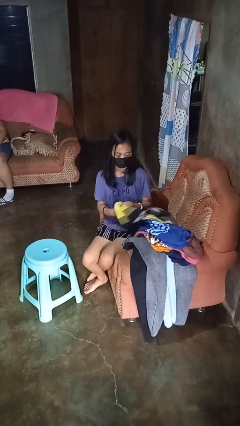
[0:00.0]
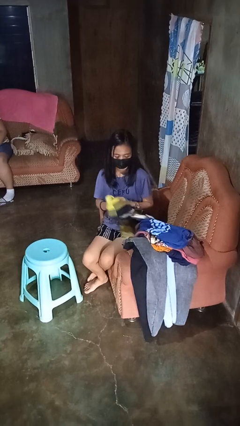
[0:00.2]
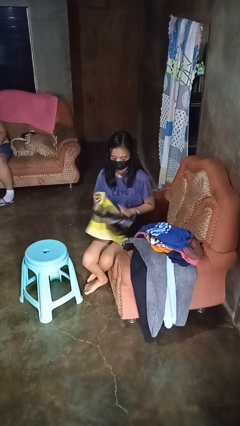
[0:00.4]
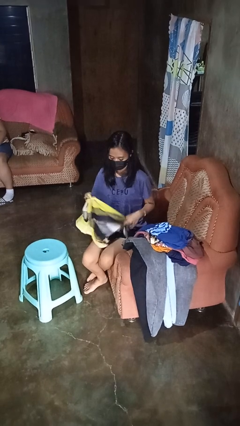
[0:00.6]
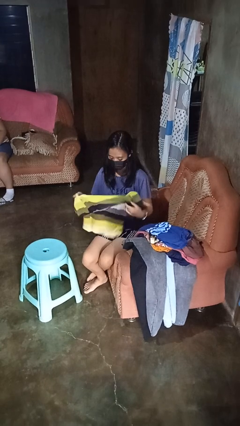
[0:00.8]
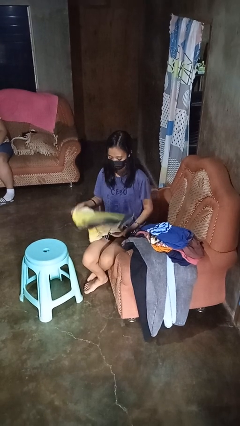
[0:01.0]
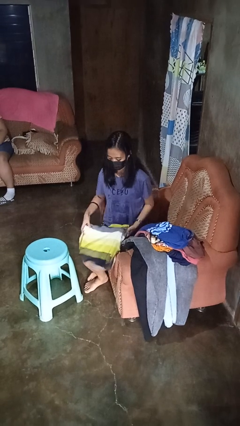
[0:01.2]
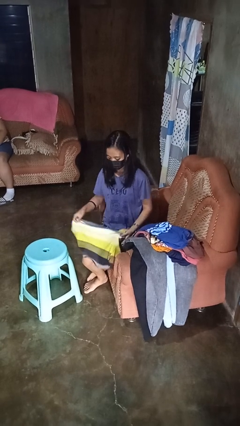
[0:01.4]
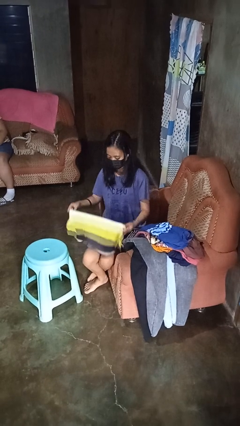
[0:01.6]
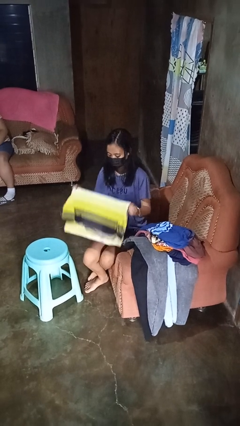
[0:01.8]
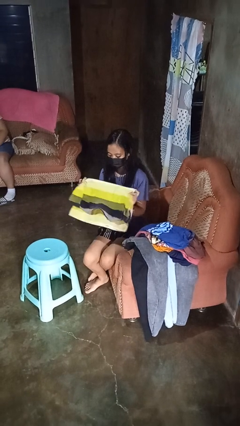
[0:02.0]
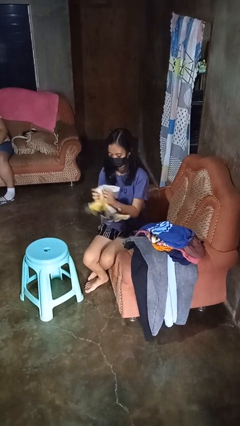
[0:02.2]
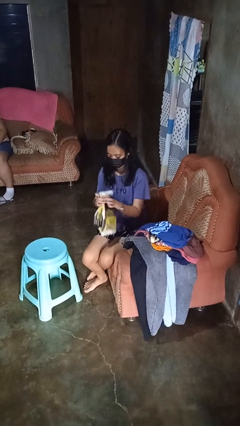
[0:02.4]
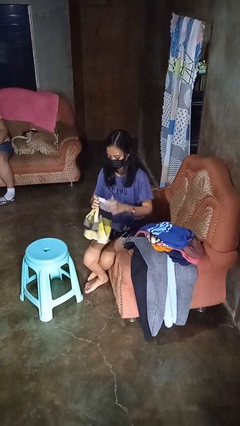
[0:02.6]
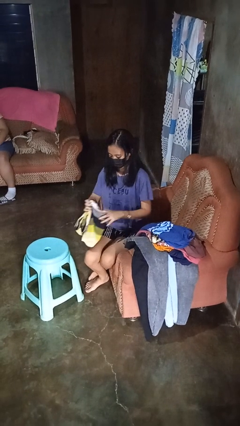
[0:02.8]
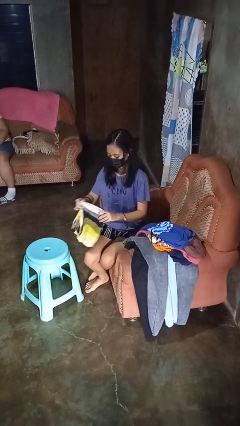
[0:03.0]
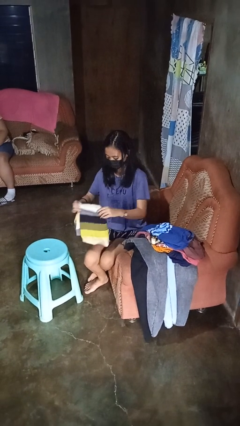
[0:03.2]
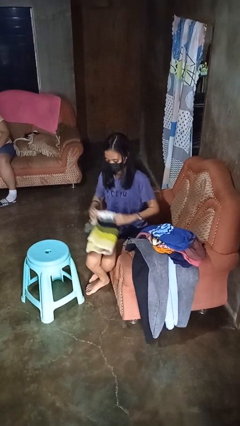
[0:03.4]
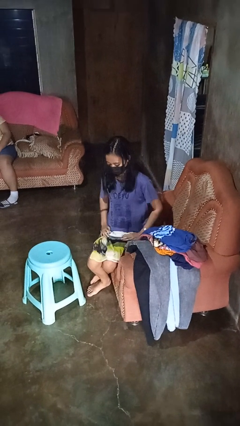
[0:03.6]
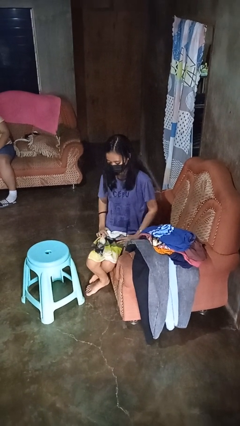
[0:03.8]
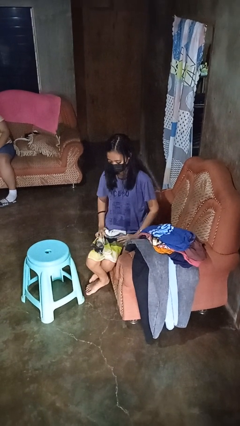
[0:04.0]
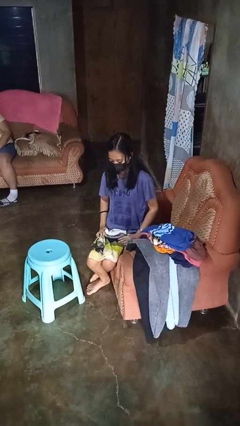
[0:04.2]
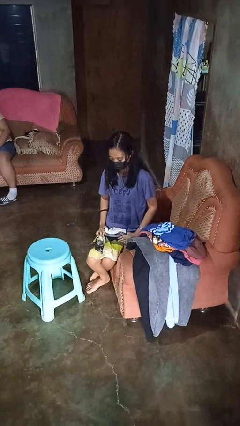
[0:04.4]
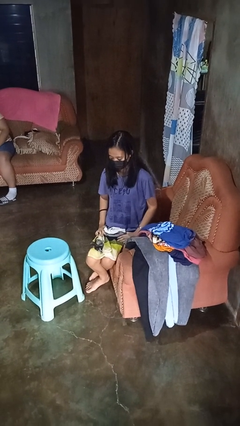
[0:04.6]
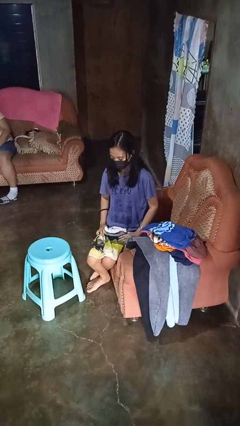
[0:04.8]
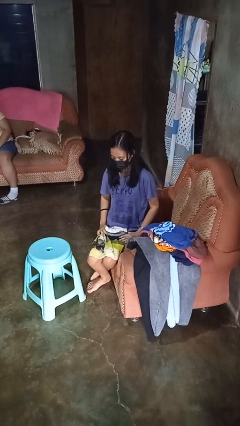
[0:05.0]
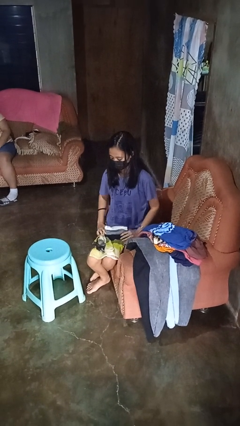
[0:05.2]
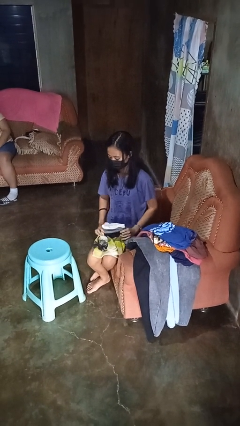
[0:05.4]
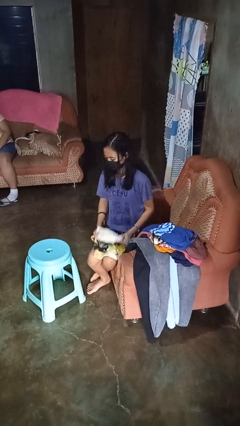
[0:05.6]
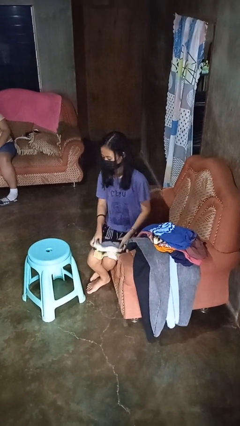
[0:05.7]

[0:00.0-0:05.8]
person folds shirt

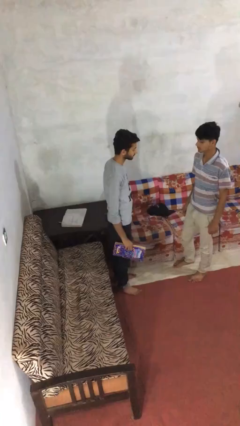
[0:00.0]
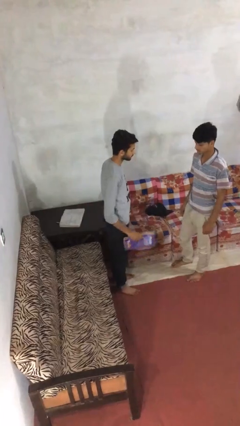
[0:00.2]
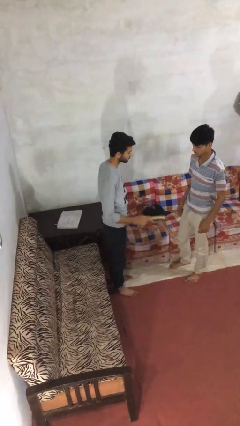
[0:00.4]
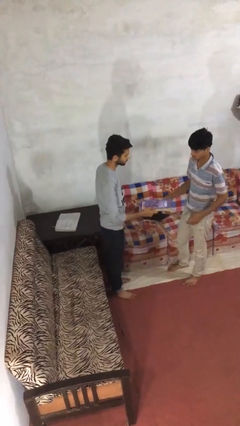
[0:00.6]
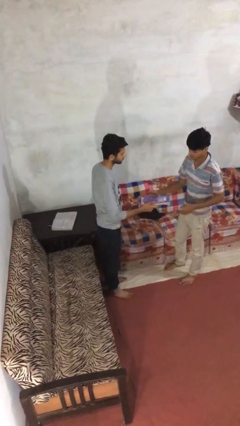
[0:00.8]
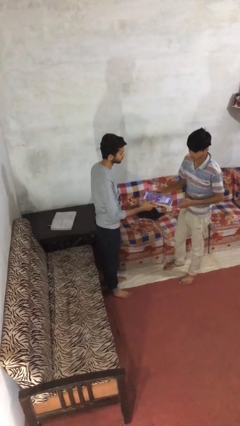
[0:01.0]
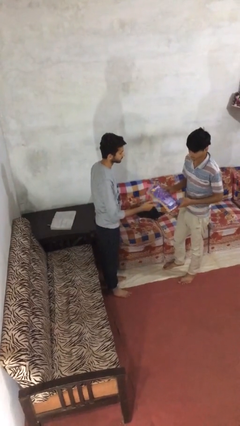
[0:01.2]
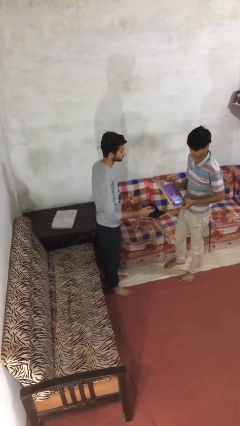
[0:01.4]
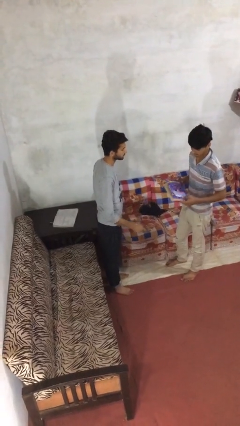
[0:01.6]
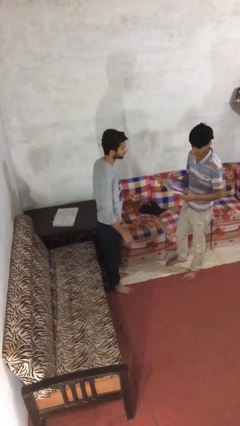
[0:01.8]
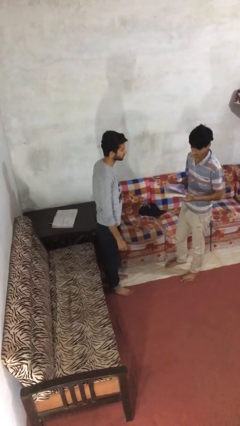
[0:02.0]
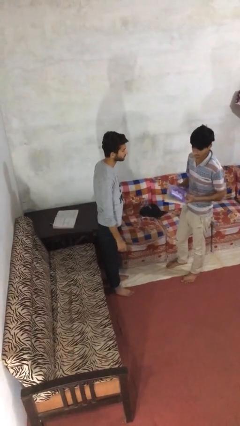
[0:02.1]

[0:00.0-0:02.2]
person transfers object to person

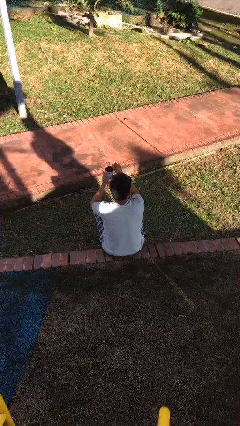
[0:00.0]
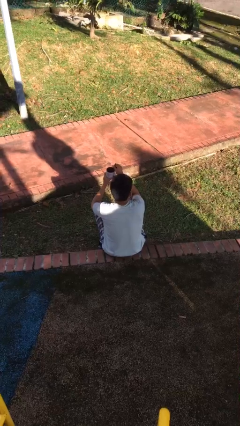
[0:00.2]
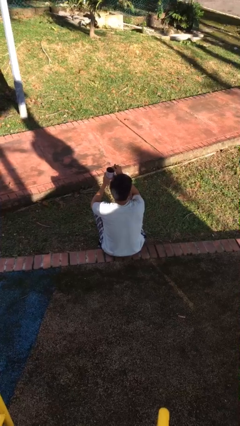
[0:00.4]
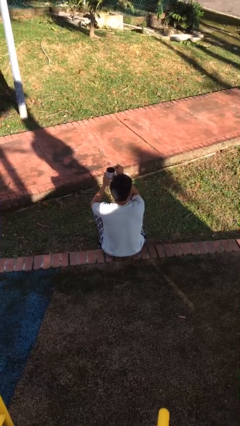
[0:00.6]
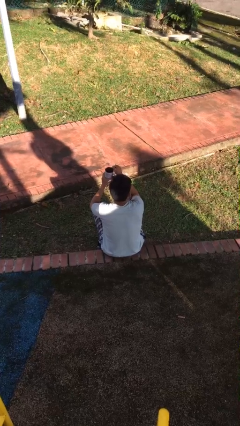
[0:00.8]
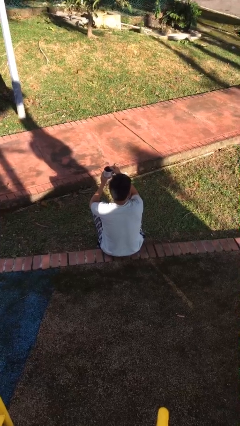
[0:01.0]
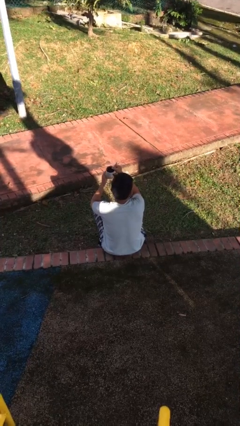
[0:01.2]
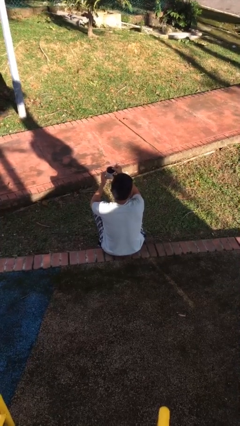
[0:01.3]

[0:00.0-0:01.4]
person stirs mug

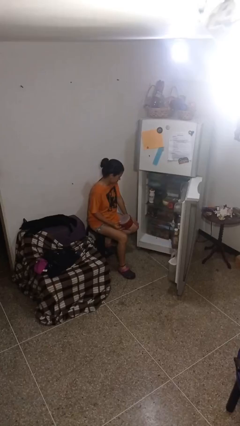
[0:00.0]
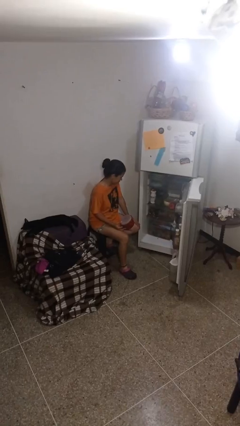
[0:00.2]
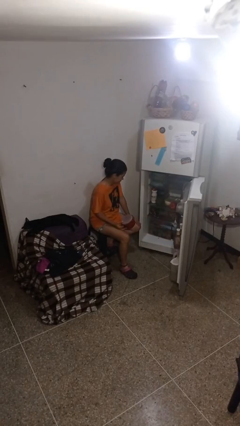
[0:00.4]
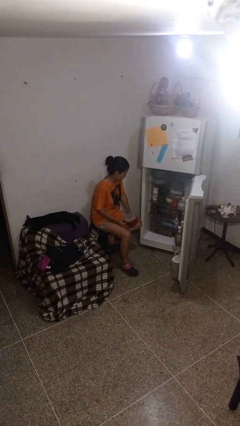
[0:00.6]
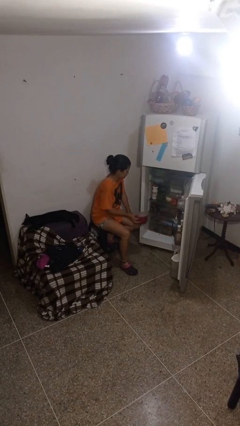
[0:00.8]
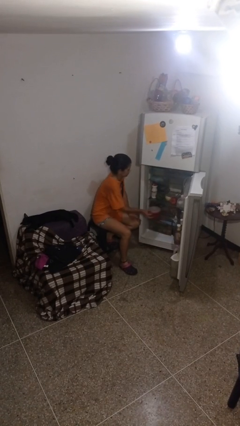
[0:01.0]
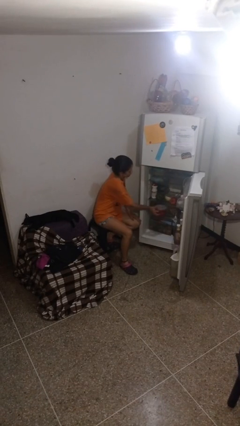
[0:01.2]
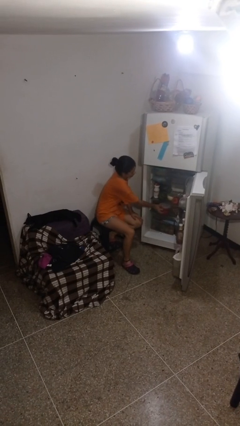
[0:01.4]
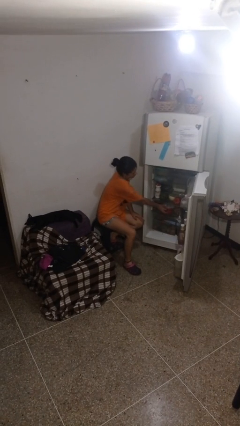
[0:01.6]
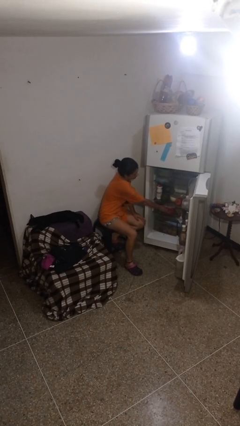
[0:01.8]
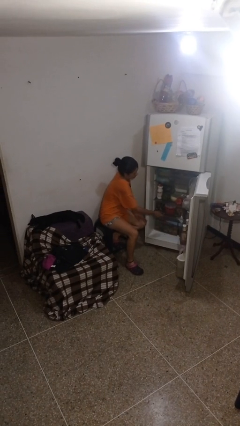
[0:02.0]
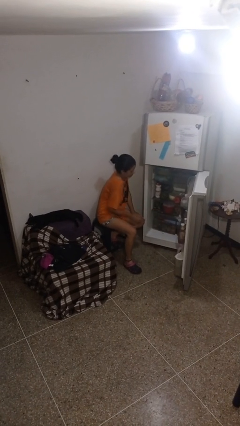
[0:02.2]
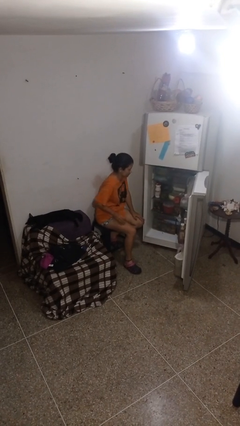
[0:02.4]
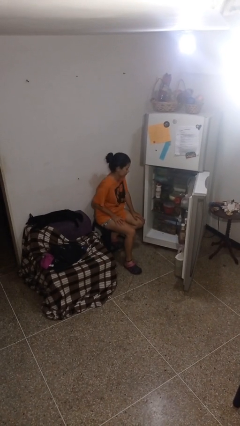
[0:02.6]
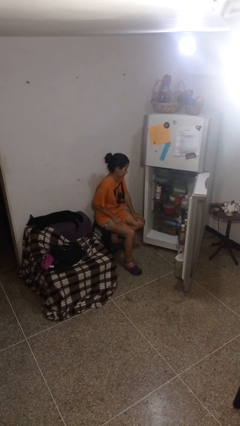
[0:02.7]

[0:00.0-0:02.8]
person puts object into refrigerator

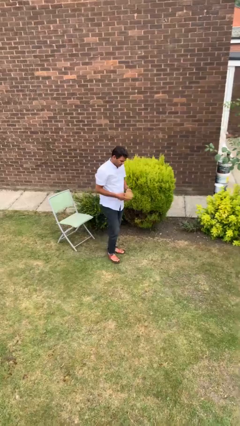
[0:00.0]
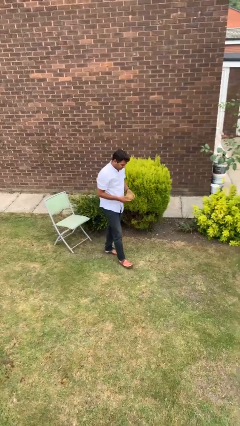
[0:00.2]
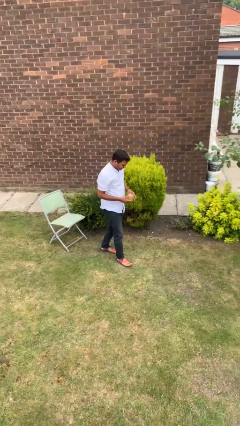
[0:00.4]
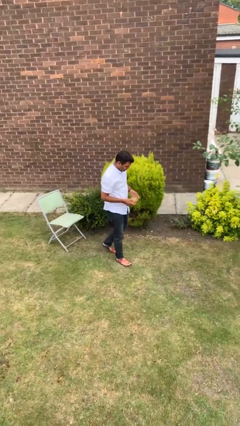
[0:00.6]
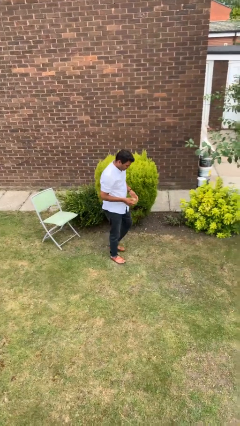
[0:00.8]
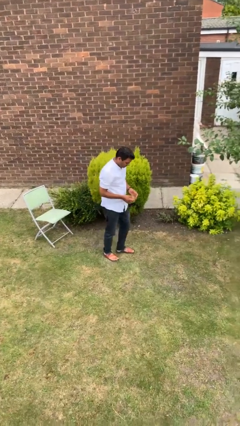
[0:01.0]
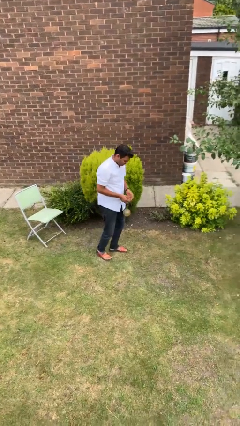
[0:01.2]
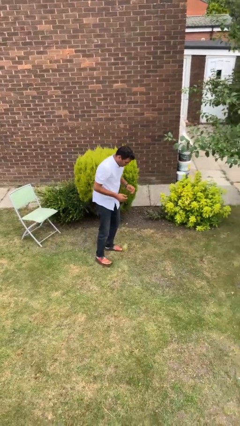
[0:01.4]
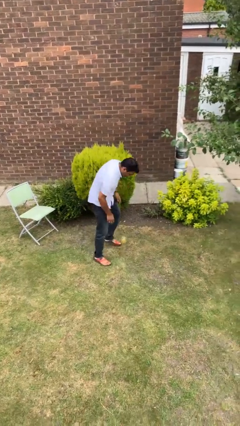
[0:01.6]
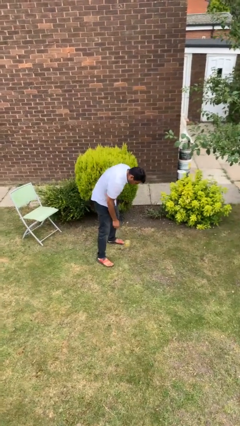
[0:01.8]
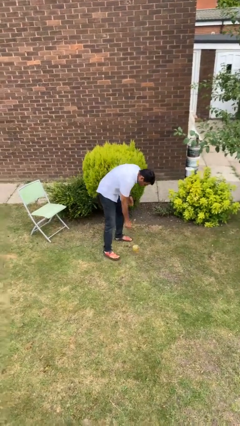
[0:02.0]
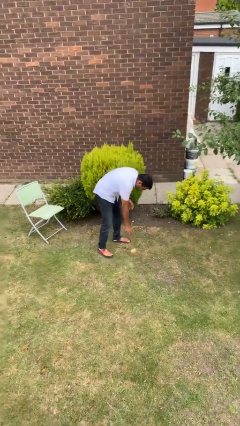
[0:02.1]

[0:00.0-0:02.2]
person drops object

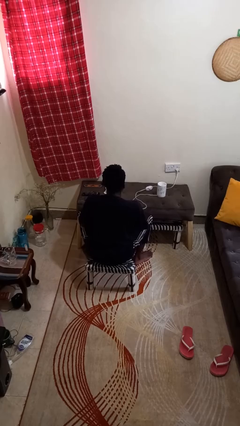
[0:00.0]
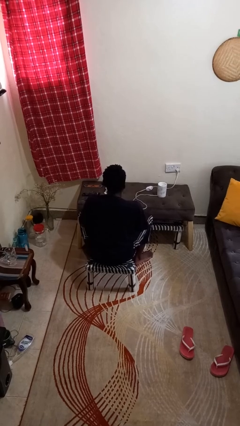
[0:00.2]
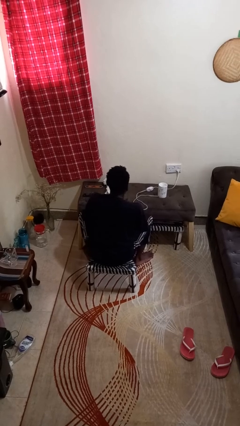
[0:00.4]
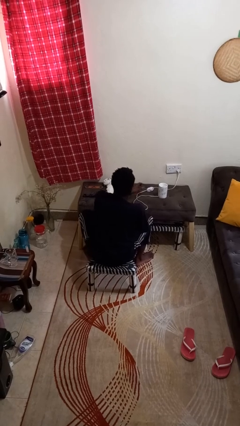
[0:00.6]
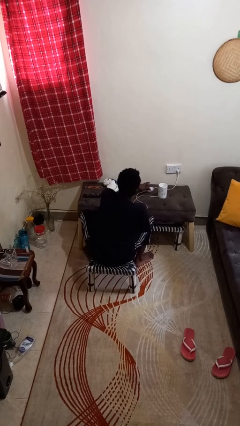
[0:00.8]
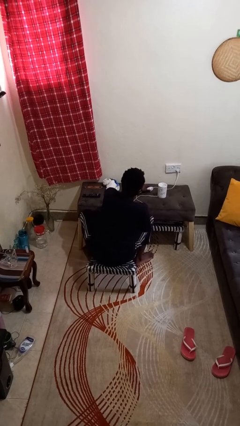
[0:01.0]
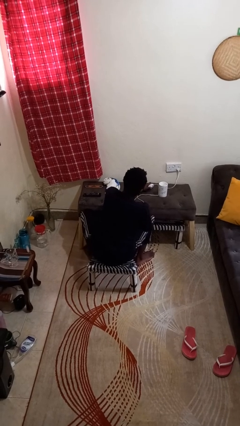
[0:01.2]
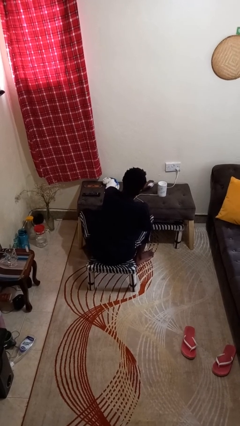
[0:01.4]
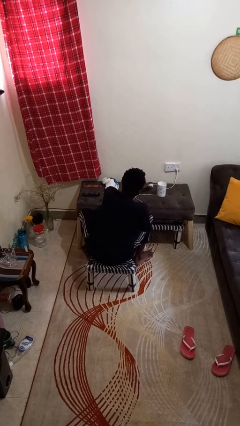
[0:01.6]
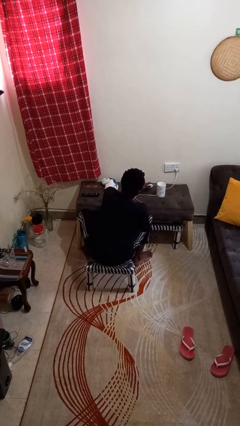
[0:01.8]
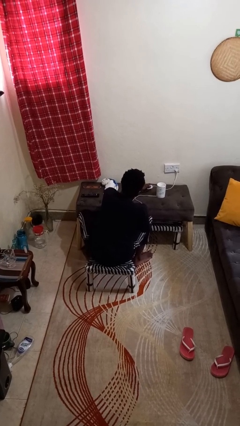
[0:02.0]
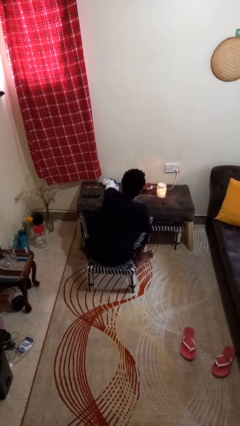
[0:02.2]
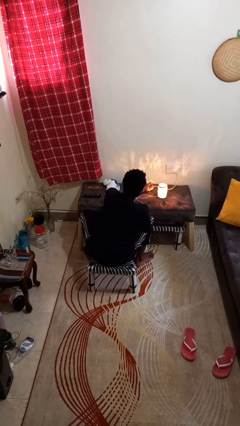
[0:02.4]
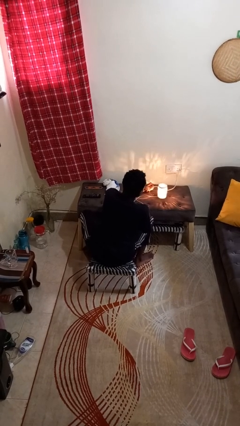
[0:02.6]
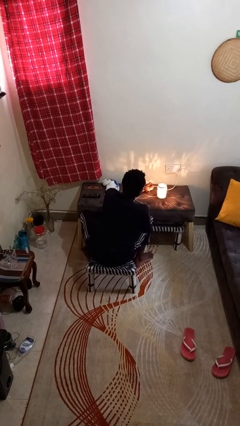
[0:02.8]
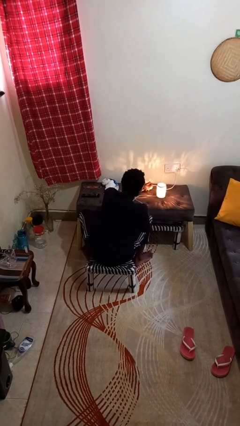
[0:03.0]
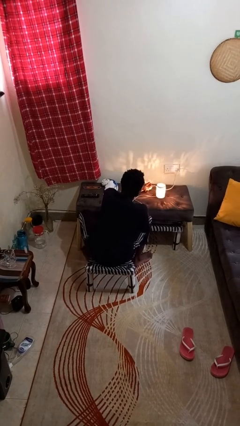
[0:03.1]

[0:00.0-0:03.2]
person turns on fan
